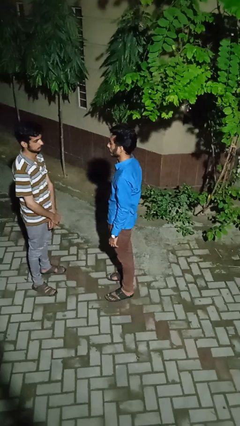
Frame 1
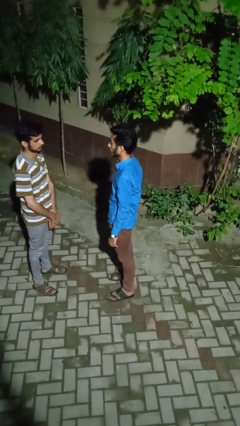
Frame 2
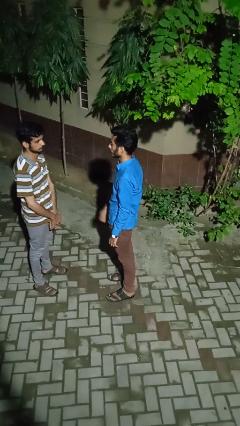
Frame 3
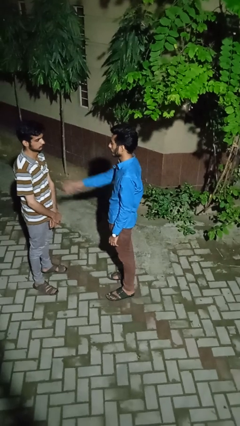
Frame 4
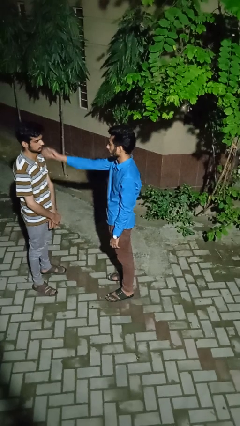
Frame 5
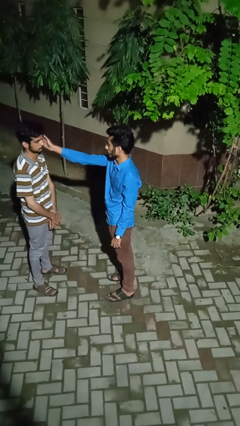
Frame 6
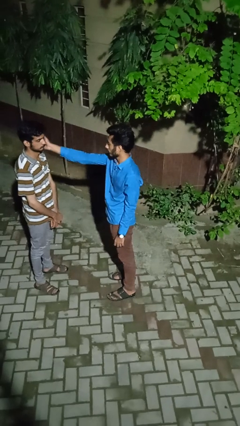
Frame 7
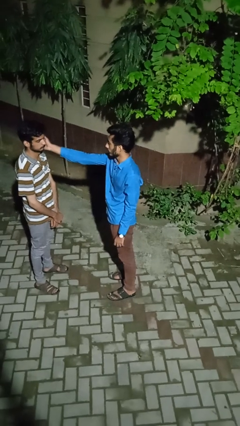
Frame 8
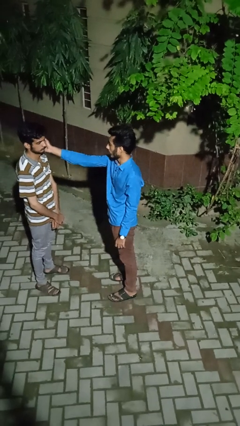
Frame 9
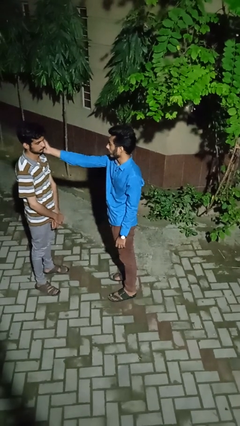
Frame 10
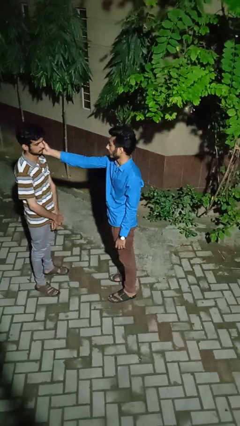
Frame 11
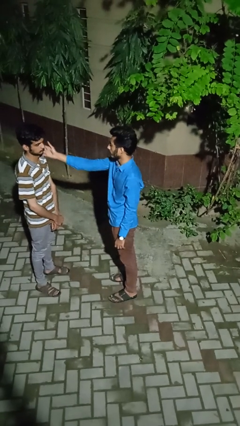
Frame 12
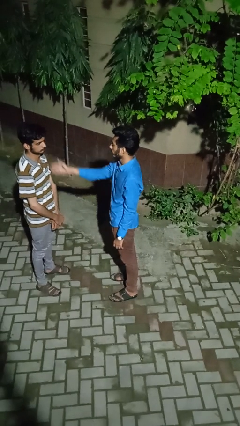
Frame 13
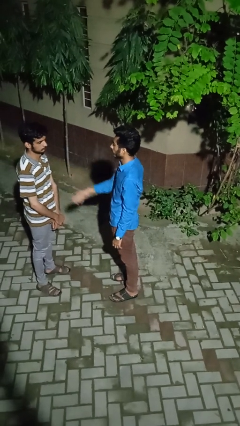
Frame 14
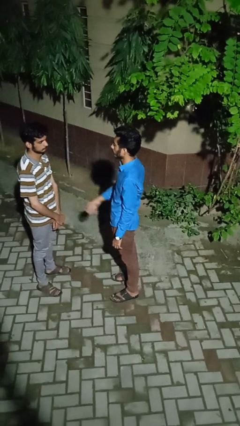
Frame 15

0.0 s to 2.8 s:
person touches face of person

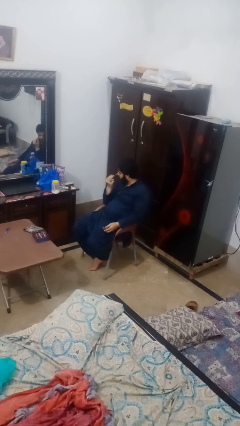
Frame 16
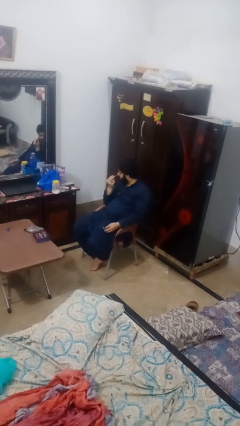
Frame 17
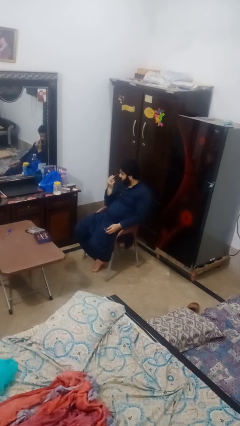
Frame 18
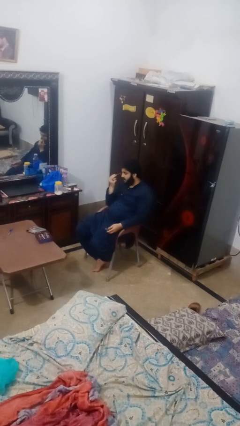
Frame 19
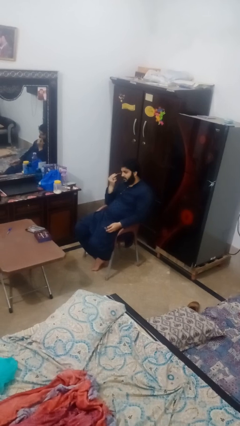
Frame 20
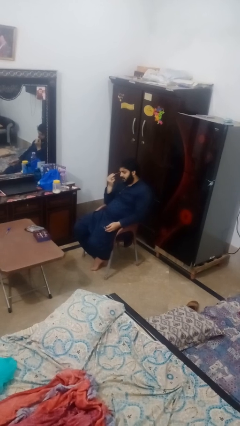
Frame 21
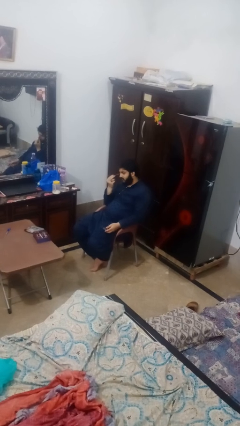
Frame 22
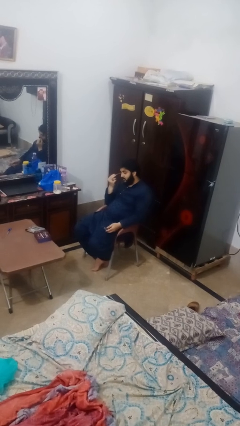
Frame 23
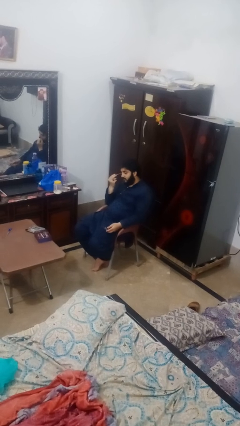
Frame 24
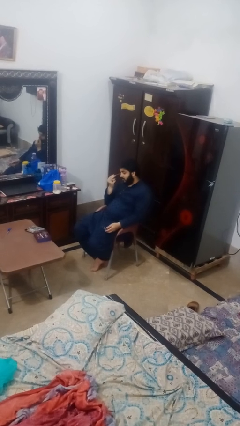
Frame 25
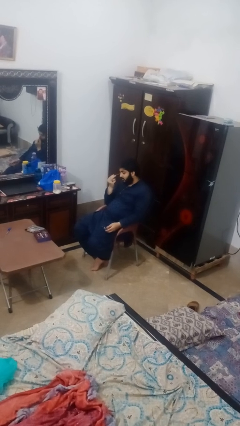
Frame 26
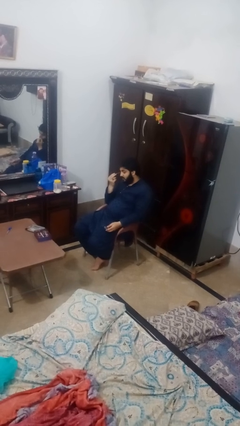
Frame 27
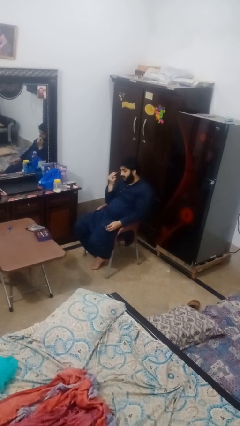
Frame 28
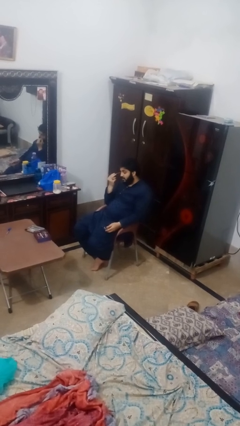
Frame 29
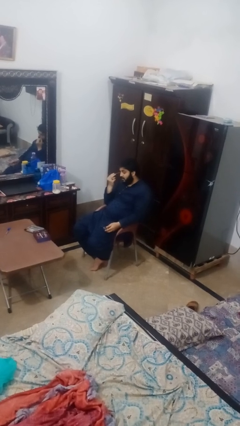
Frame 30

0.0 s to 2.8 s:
person applies eye makeup

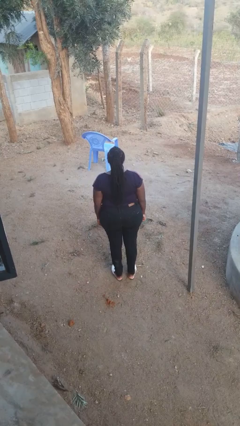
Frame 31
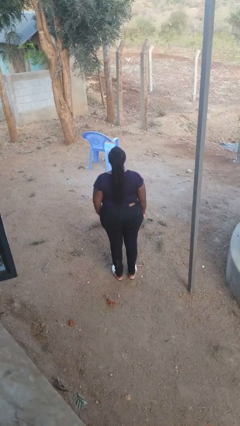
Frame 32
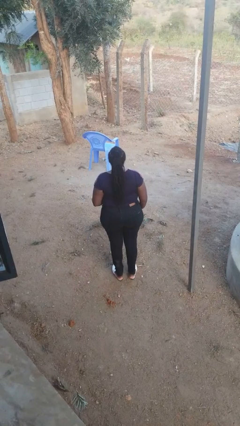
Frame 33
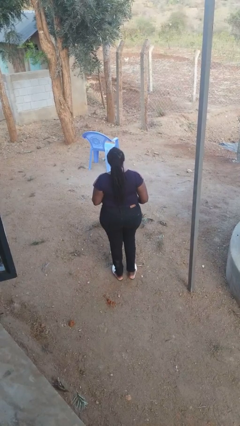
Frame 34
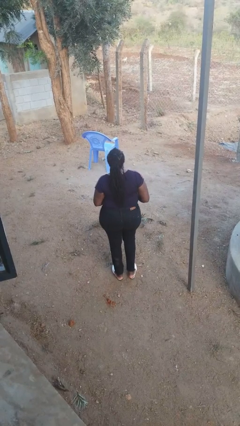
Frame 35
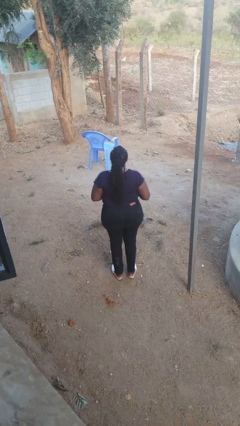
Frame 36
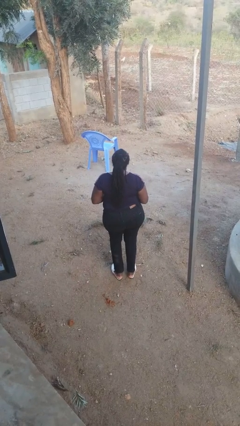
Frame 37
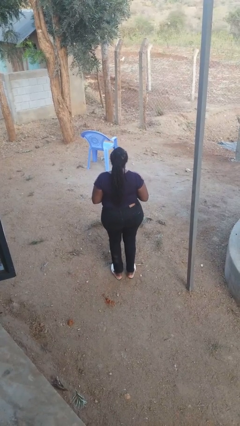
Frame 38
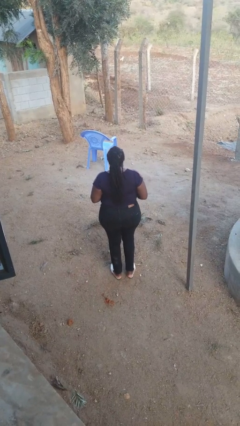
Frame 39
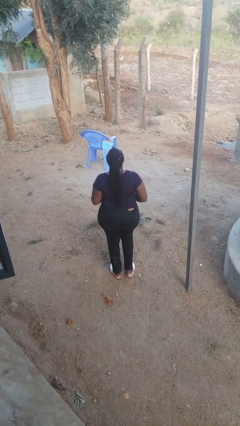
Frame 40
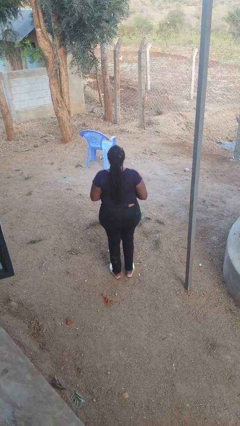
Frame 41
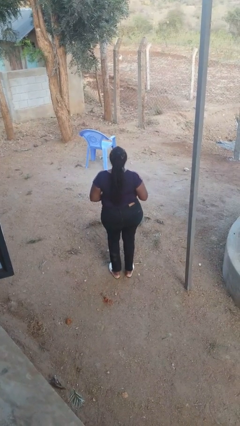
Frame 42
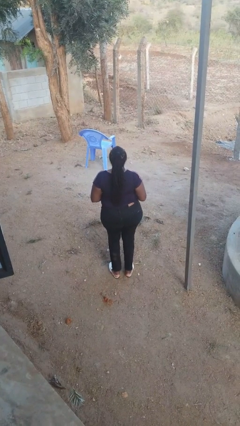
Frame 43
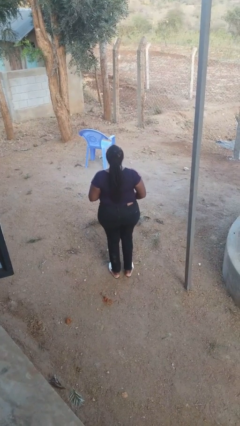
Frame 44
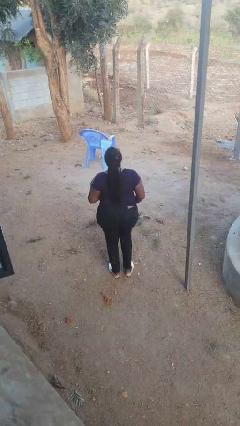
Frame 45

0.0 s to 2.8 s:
person wiggles hips

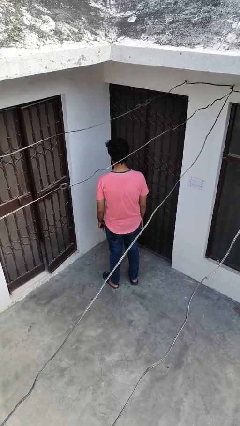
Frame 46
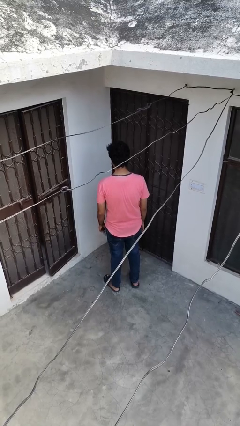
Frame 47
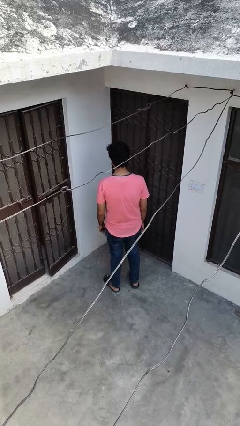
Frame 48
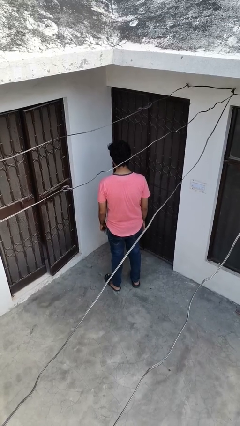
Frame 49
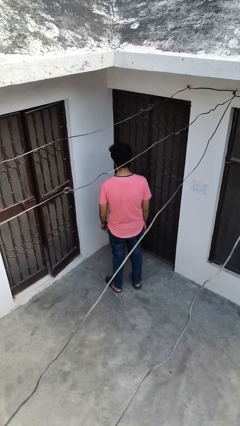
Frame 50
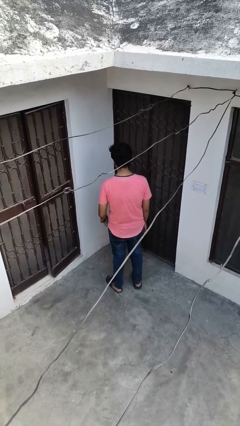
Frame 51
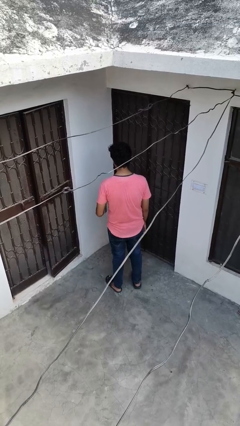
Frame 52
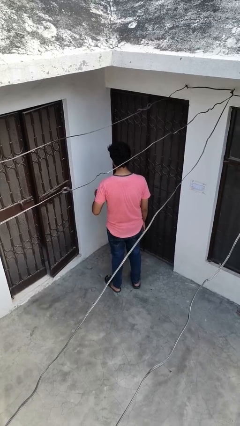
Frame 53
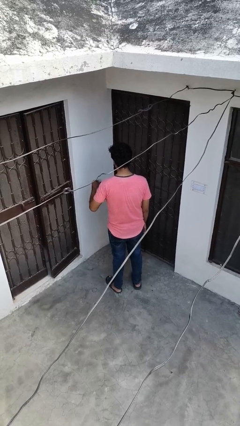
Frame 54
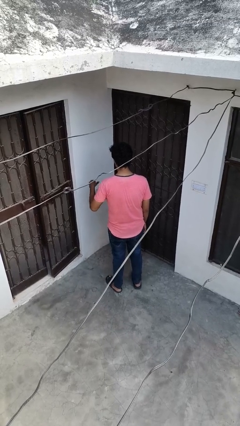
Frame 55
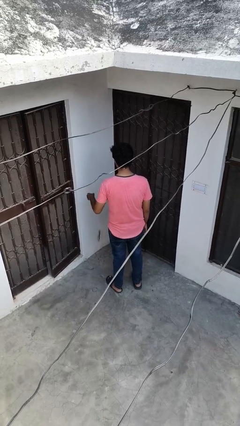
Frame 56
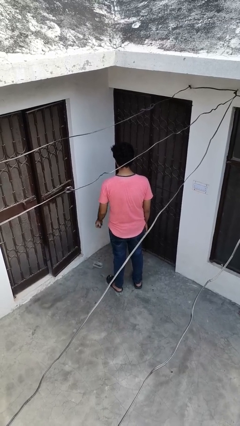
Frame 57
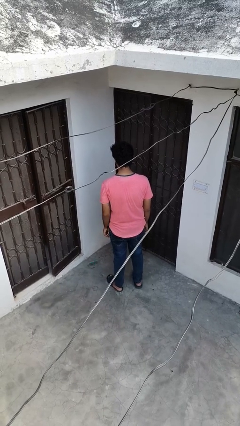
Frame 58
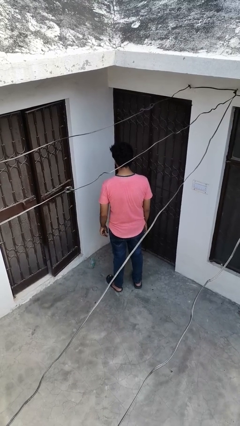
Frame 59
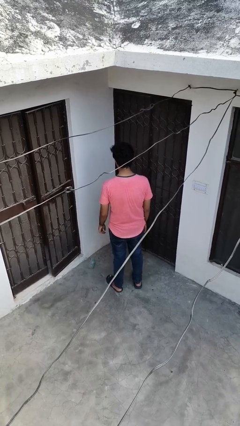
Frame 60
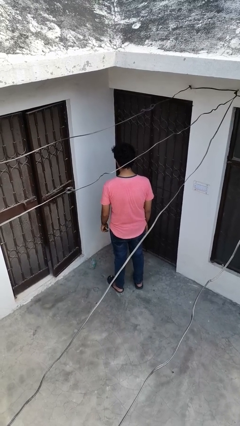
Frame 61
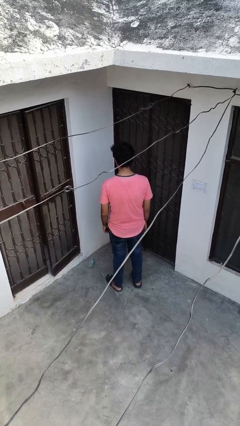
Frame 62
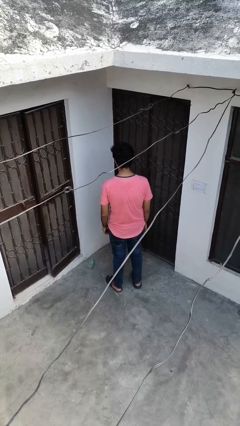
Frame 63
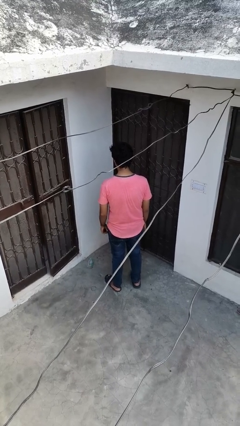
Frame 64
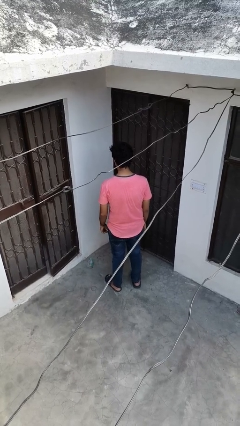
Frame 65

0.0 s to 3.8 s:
person throws object into air

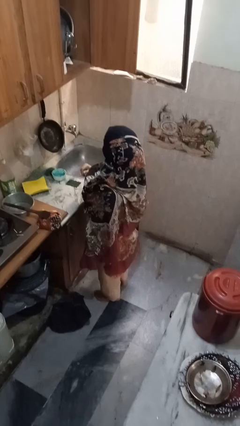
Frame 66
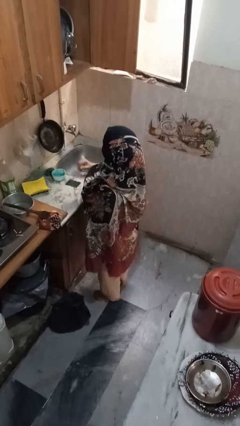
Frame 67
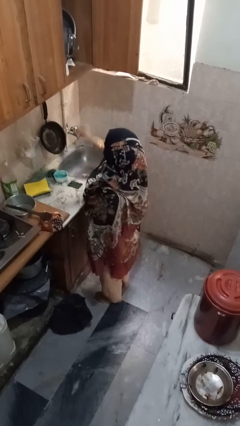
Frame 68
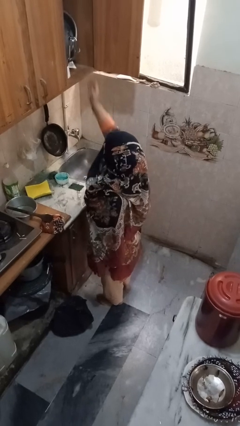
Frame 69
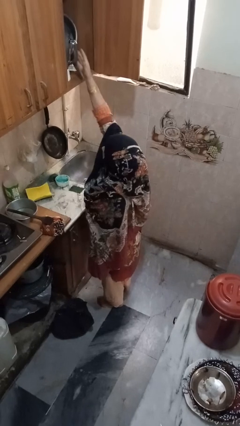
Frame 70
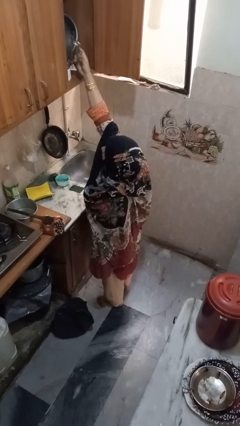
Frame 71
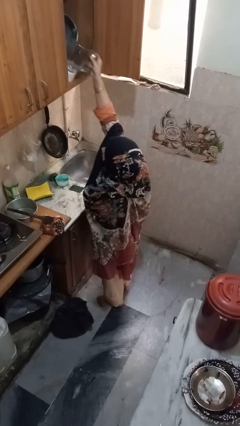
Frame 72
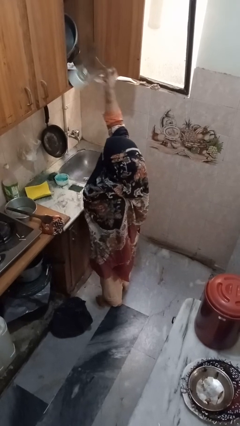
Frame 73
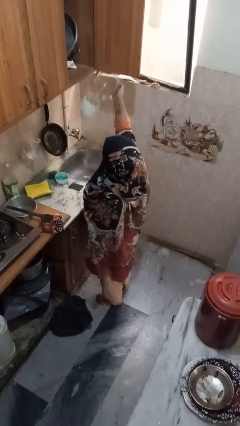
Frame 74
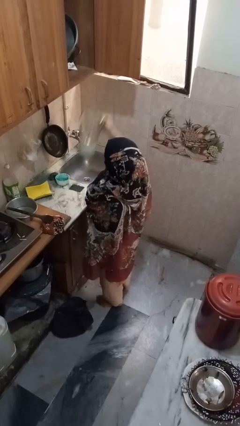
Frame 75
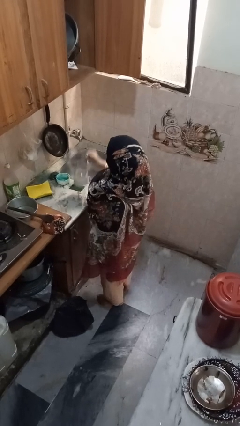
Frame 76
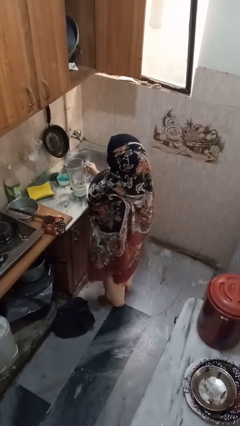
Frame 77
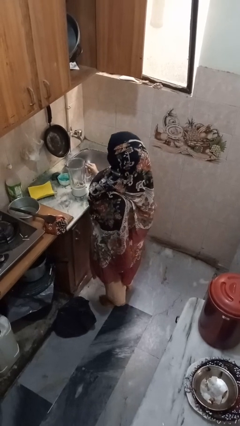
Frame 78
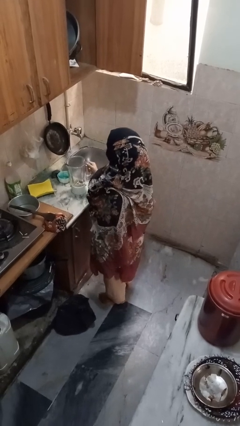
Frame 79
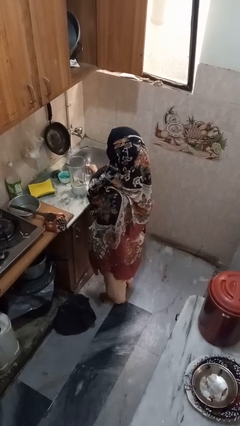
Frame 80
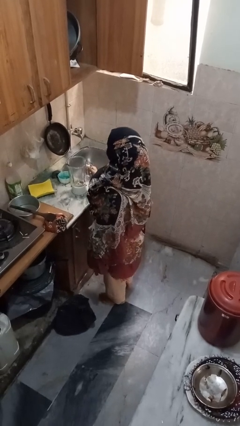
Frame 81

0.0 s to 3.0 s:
person puts object in cabinet

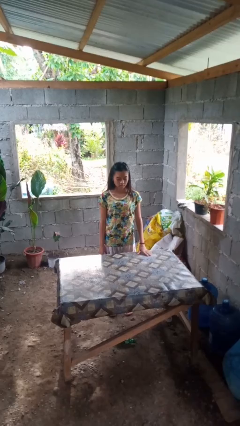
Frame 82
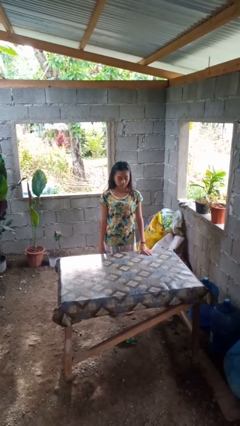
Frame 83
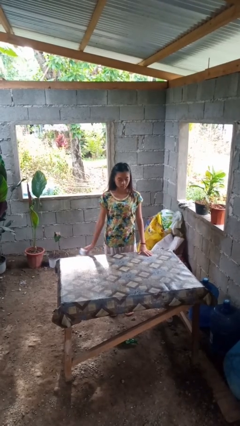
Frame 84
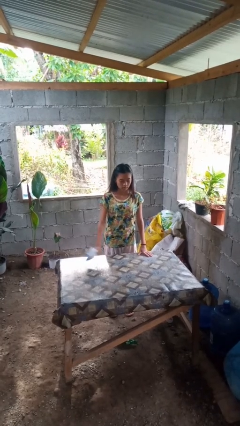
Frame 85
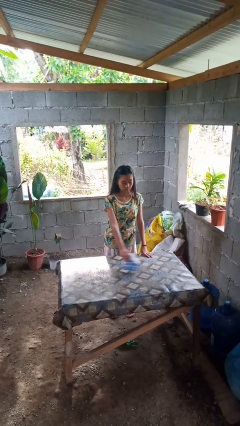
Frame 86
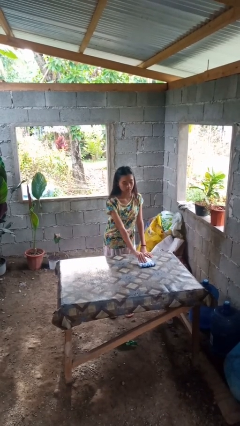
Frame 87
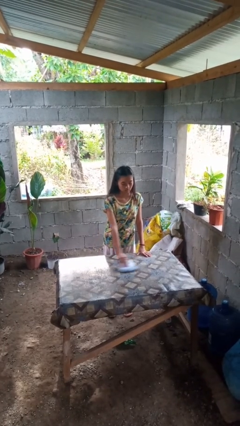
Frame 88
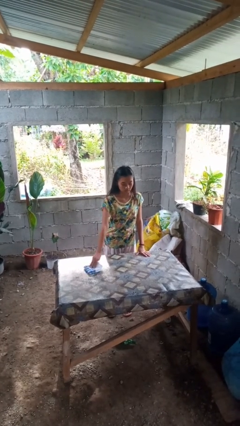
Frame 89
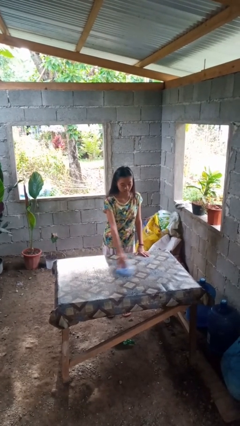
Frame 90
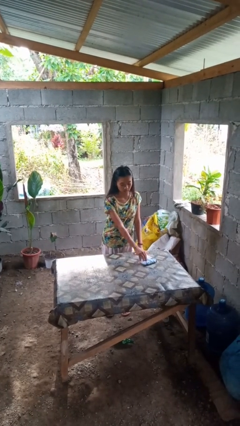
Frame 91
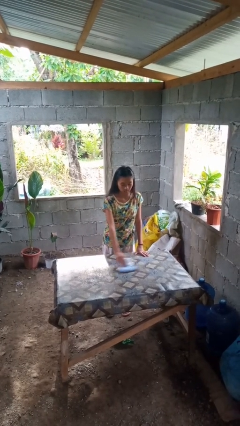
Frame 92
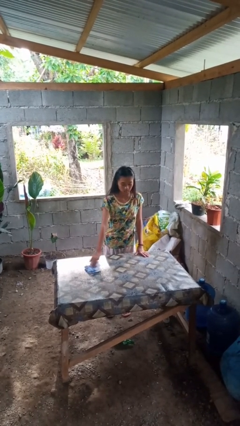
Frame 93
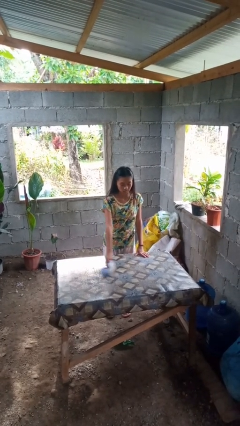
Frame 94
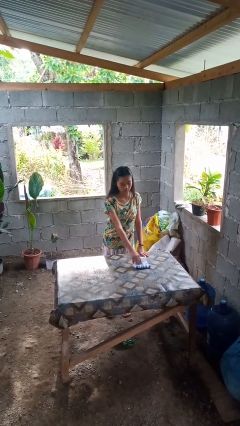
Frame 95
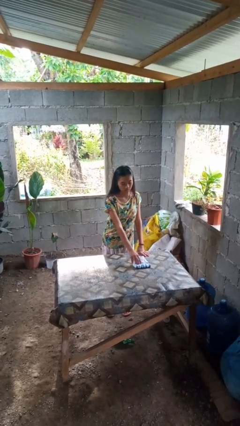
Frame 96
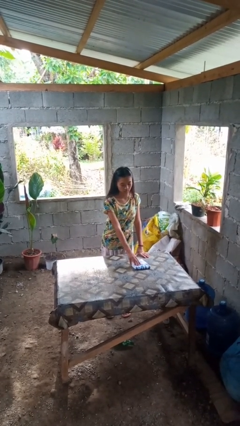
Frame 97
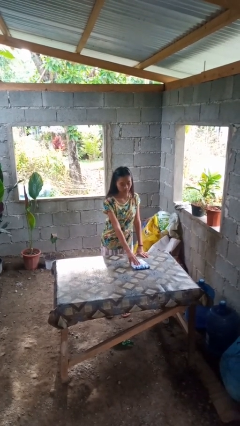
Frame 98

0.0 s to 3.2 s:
person cleans table with rag
